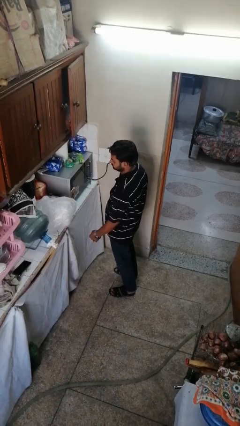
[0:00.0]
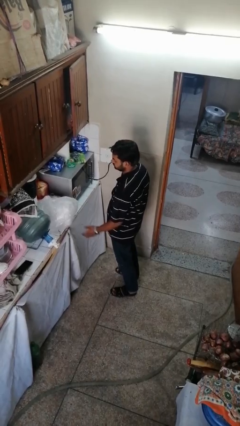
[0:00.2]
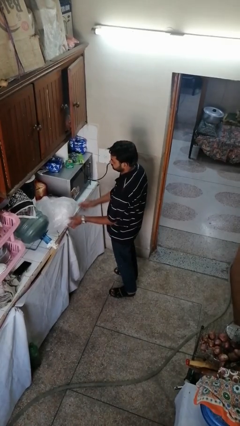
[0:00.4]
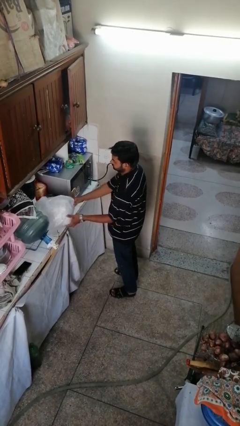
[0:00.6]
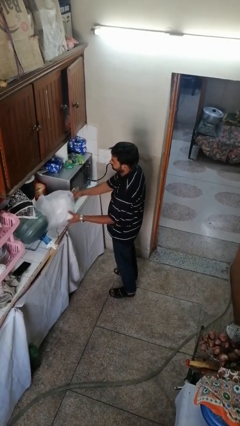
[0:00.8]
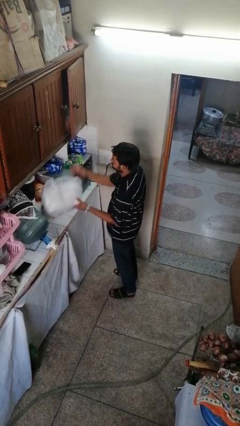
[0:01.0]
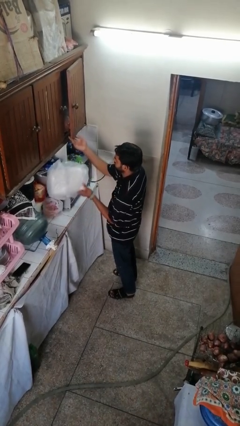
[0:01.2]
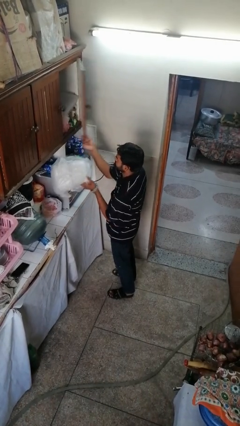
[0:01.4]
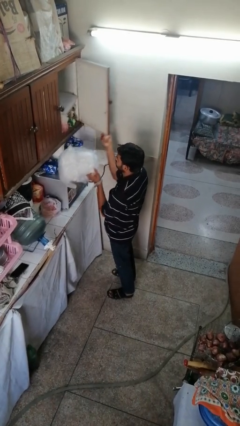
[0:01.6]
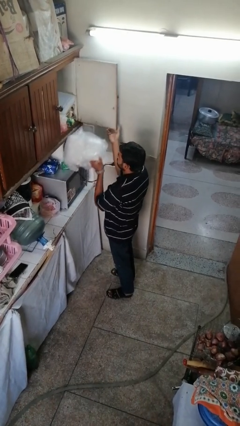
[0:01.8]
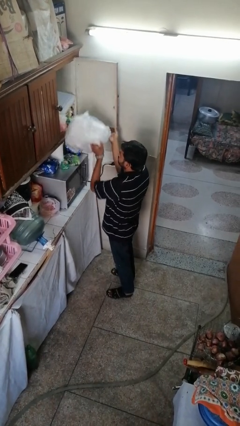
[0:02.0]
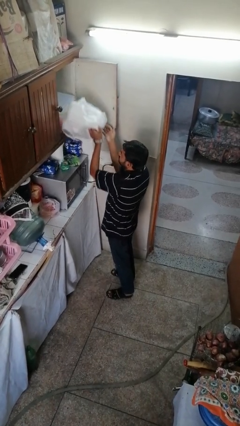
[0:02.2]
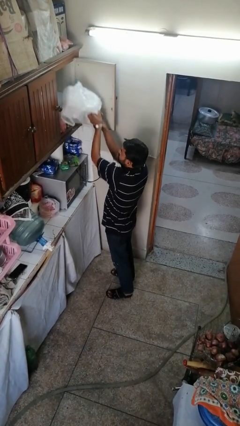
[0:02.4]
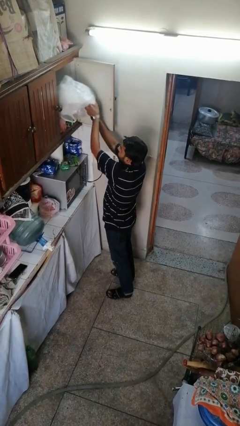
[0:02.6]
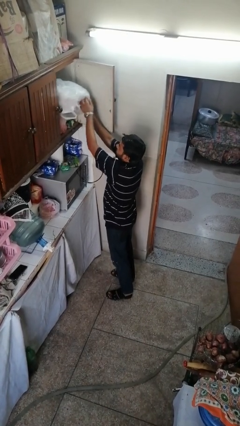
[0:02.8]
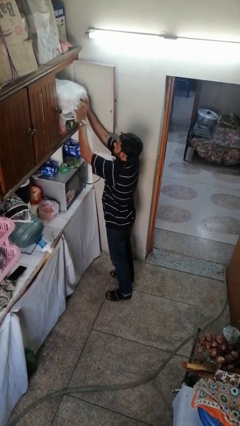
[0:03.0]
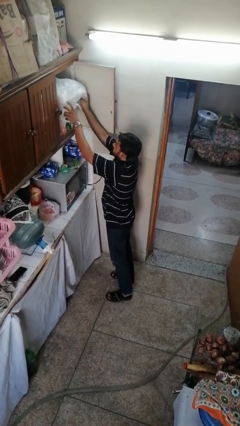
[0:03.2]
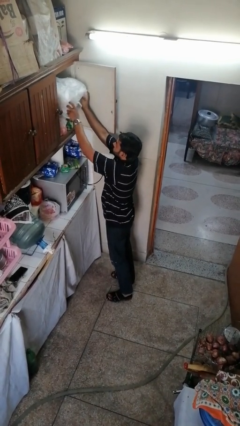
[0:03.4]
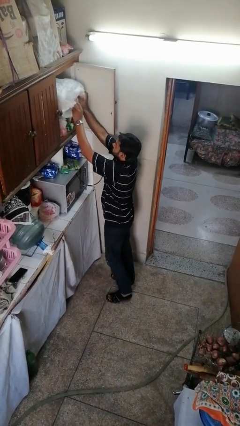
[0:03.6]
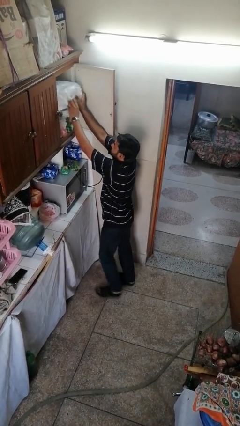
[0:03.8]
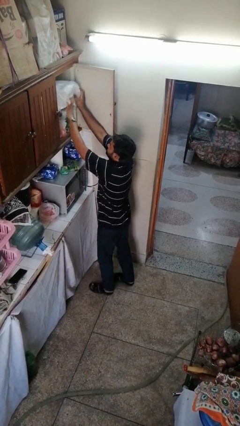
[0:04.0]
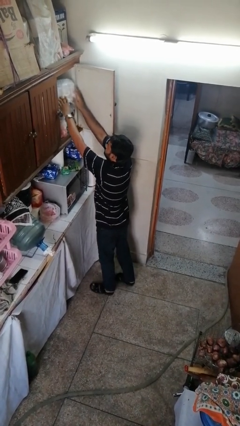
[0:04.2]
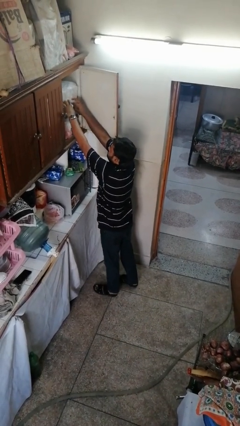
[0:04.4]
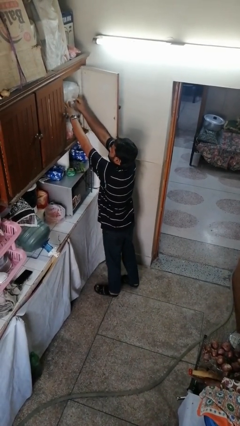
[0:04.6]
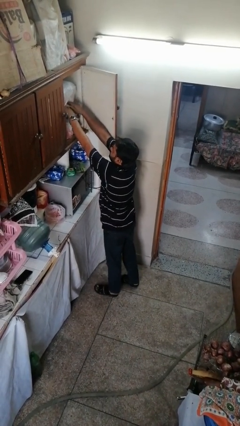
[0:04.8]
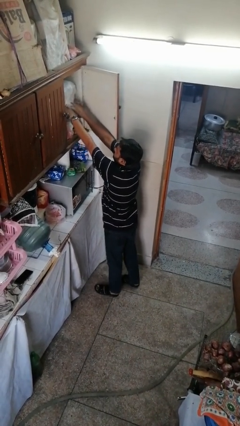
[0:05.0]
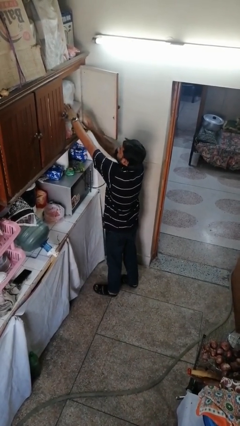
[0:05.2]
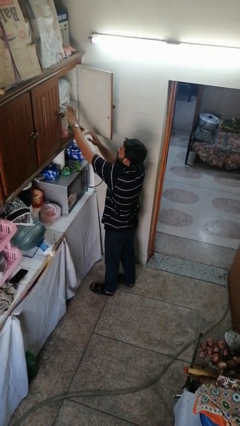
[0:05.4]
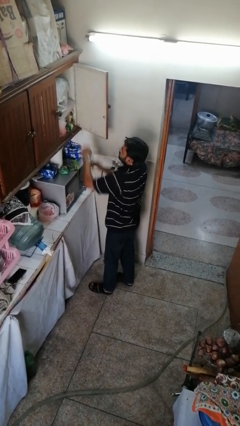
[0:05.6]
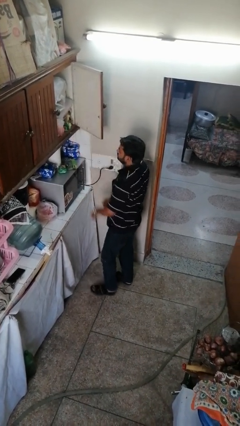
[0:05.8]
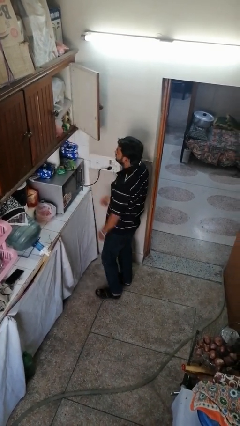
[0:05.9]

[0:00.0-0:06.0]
person loads groceries into cabinet

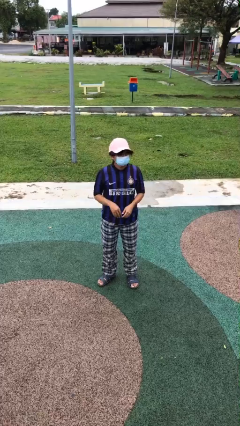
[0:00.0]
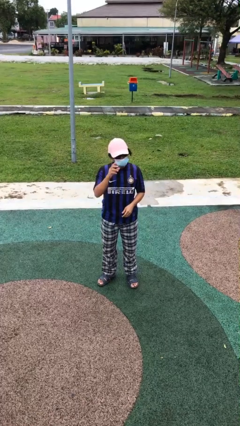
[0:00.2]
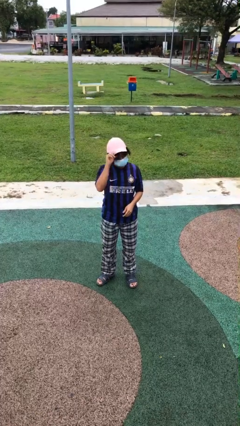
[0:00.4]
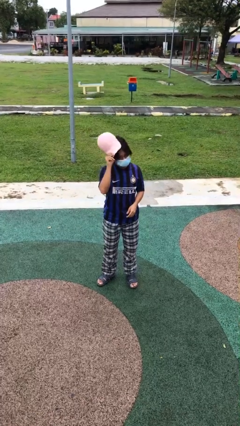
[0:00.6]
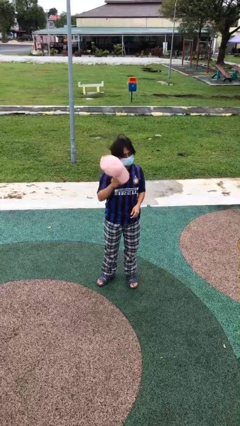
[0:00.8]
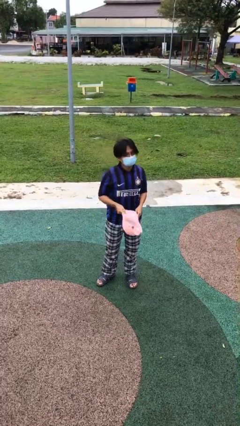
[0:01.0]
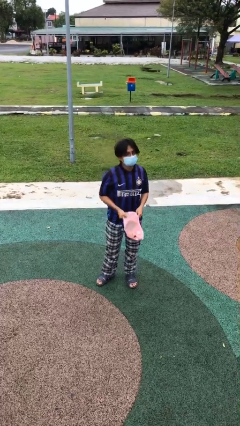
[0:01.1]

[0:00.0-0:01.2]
person takes off hat

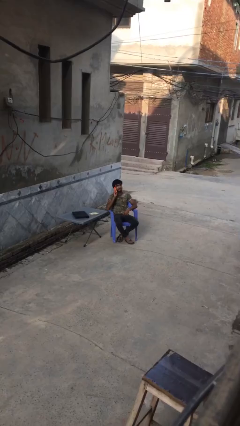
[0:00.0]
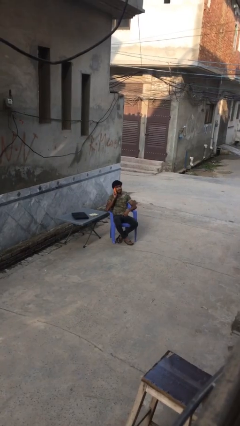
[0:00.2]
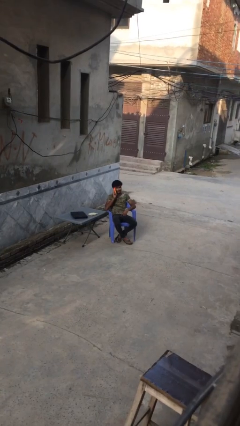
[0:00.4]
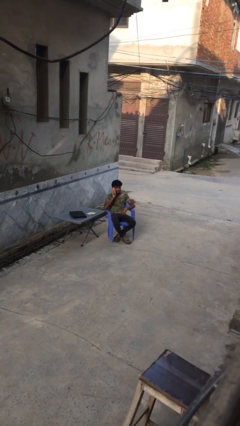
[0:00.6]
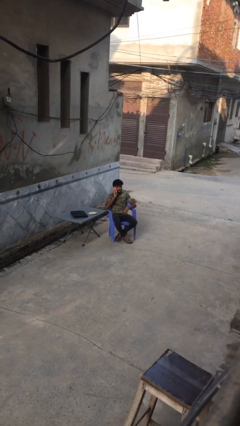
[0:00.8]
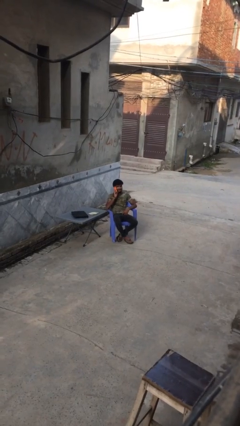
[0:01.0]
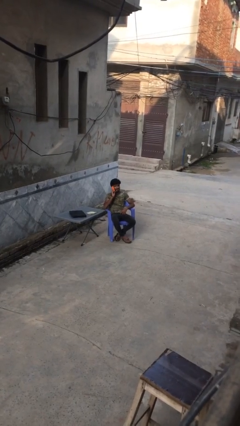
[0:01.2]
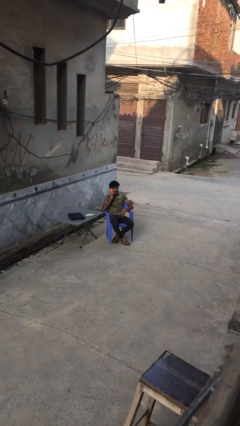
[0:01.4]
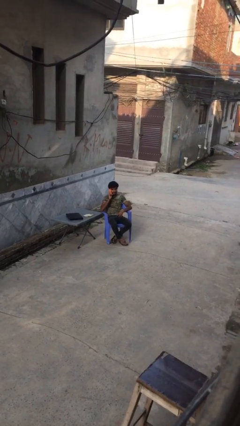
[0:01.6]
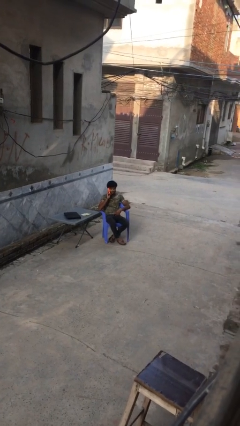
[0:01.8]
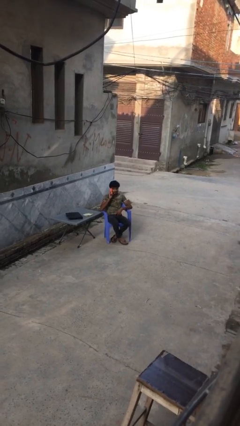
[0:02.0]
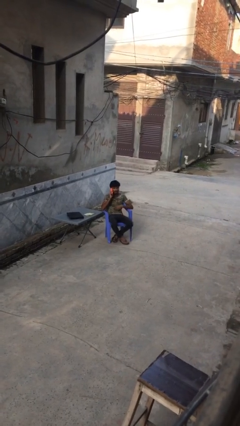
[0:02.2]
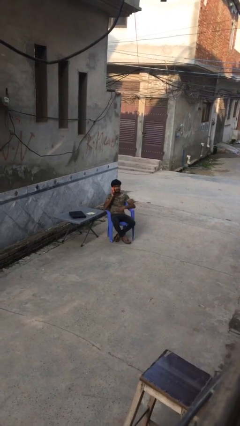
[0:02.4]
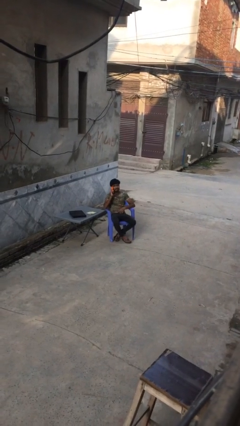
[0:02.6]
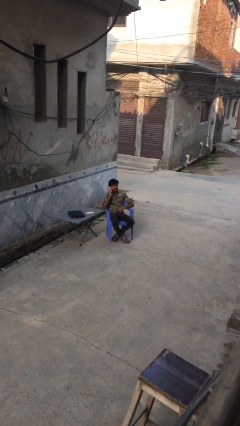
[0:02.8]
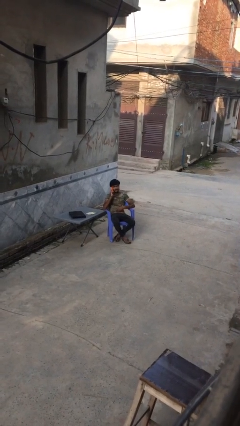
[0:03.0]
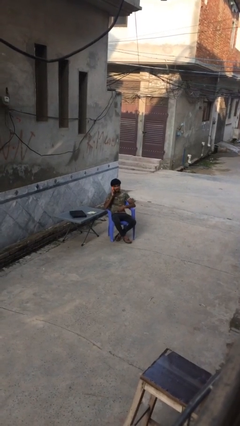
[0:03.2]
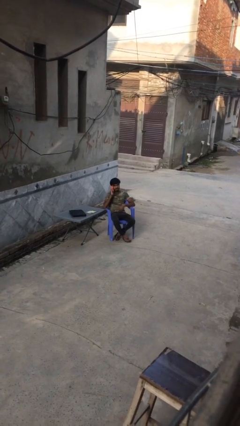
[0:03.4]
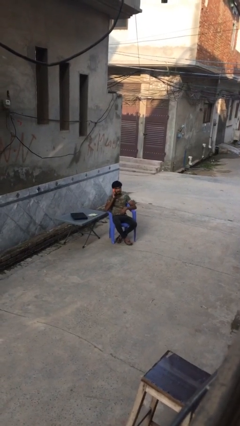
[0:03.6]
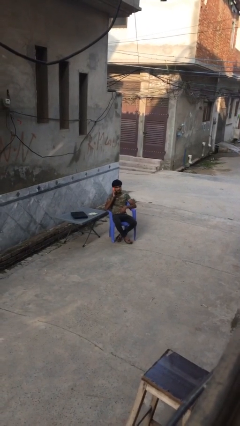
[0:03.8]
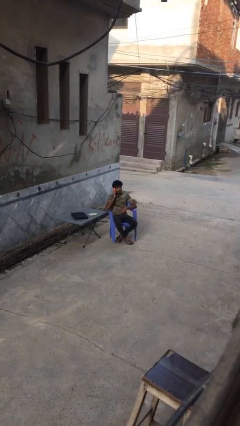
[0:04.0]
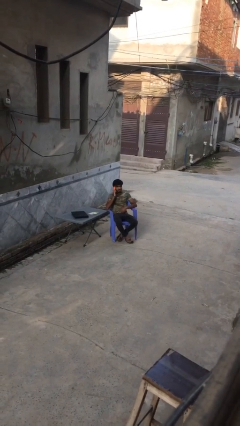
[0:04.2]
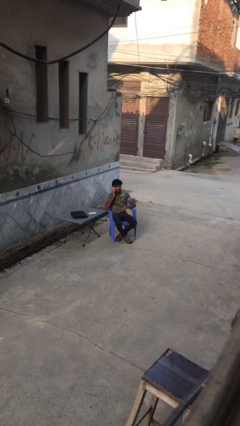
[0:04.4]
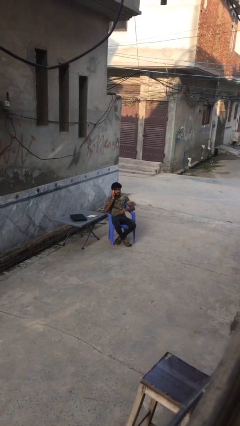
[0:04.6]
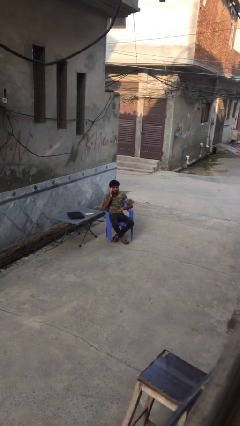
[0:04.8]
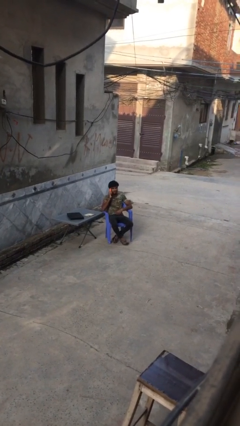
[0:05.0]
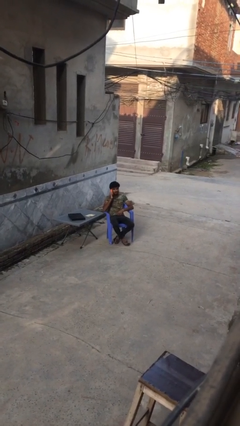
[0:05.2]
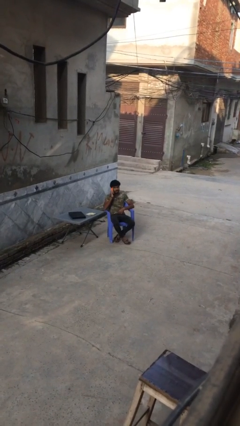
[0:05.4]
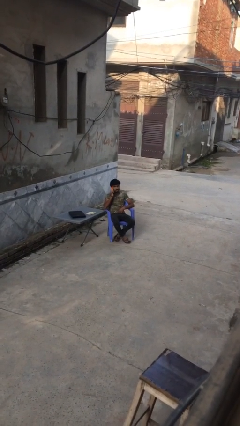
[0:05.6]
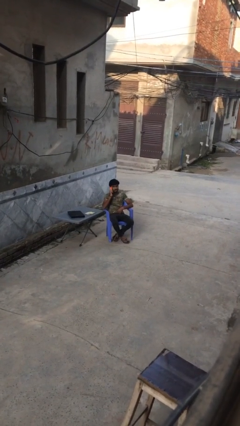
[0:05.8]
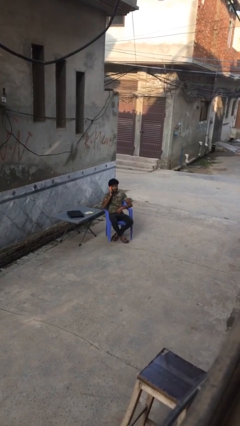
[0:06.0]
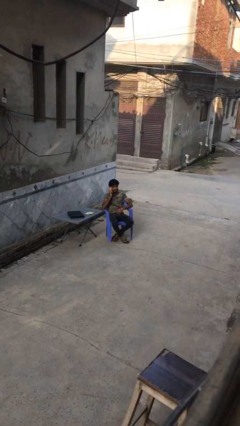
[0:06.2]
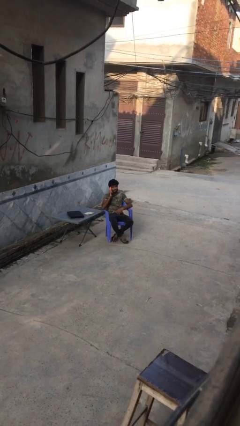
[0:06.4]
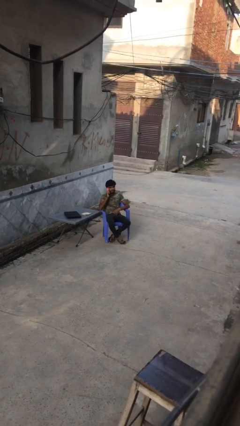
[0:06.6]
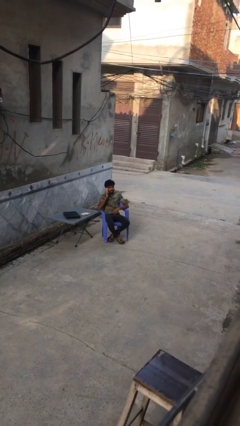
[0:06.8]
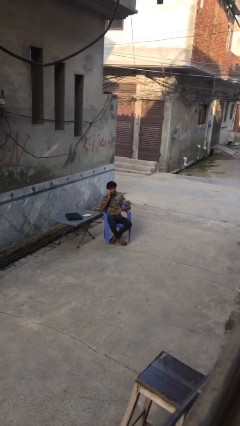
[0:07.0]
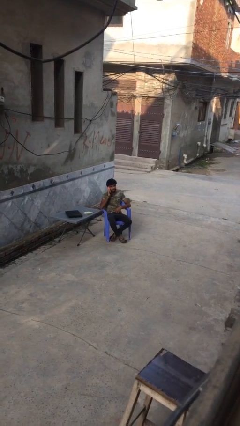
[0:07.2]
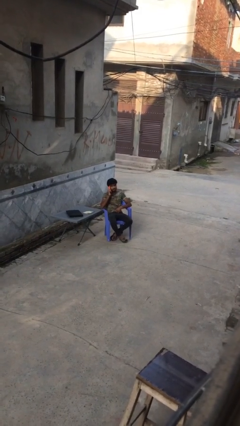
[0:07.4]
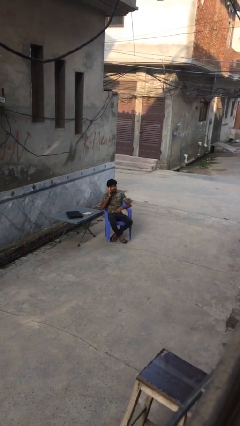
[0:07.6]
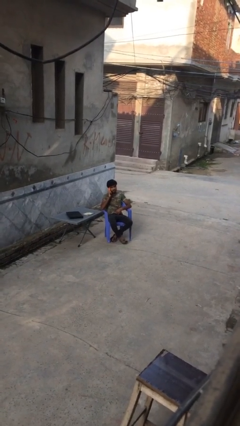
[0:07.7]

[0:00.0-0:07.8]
person talks on phone

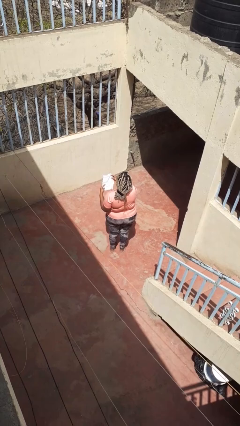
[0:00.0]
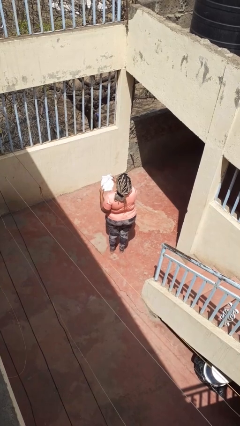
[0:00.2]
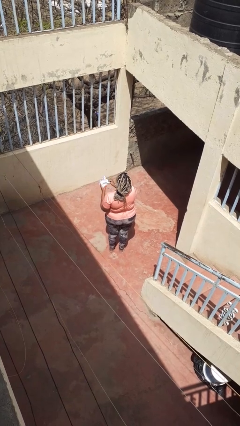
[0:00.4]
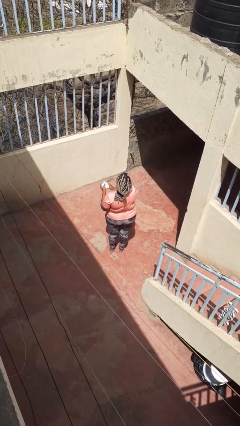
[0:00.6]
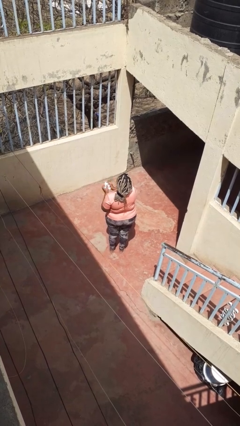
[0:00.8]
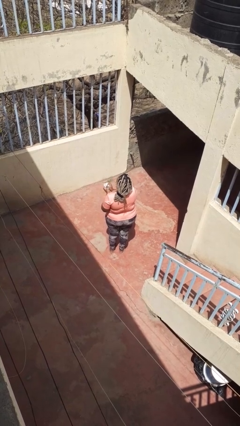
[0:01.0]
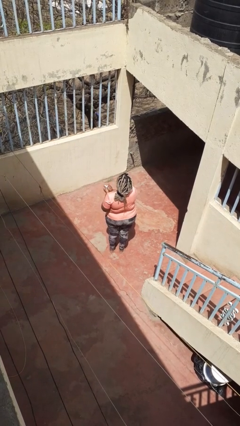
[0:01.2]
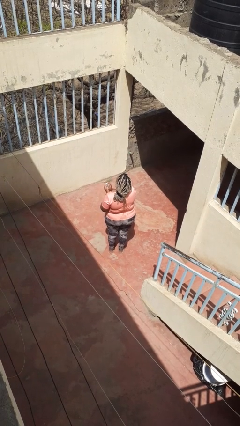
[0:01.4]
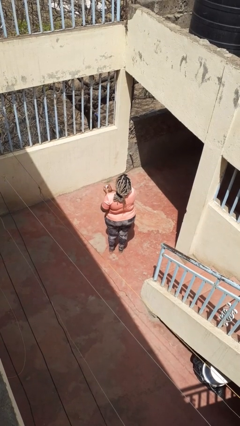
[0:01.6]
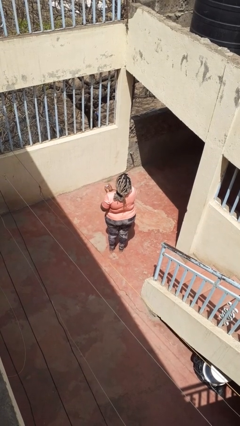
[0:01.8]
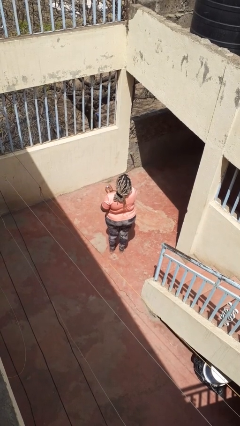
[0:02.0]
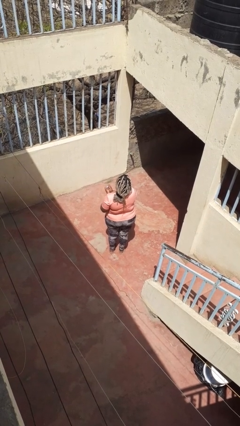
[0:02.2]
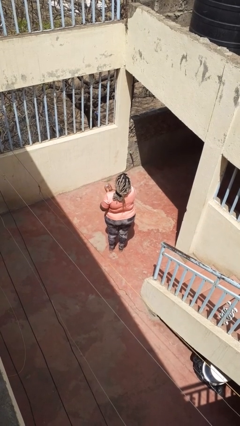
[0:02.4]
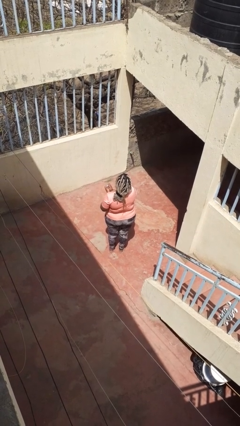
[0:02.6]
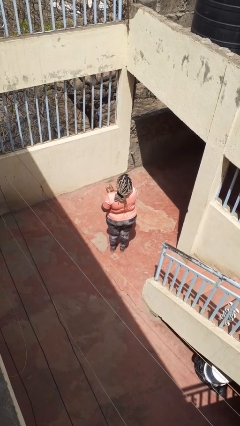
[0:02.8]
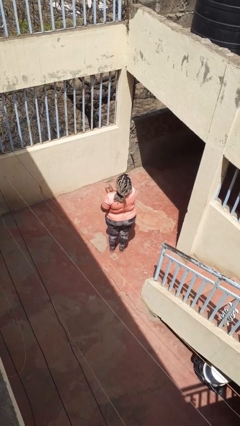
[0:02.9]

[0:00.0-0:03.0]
person crumples paper
